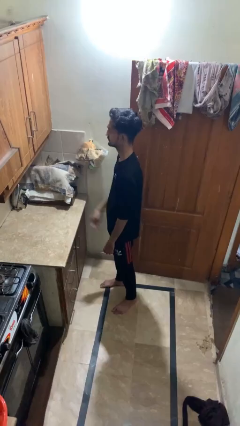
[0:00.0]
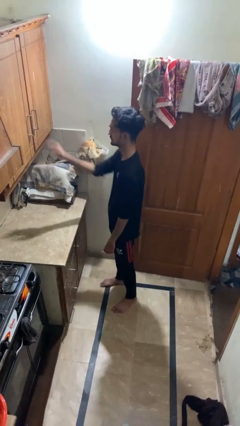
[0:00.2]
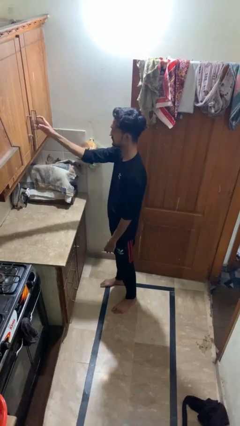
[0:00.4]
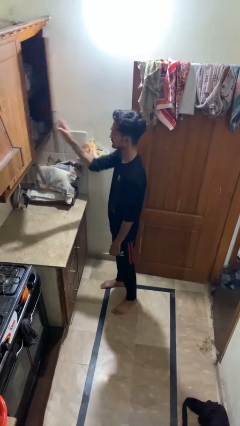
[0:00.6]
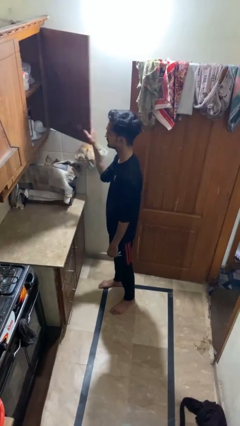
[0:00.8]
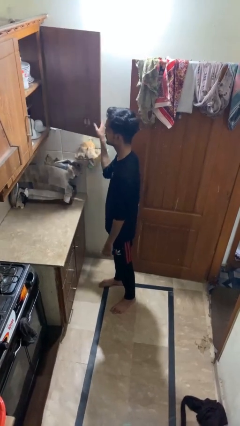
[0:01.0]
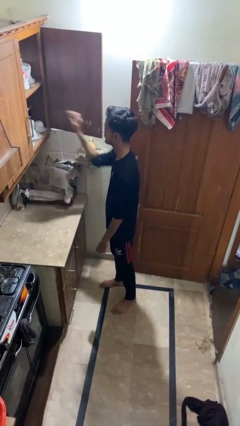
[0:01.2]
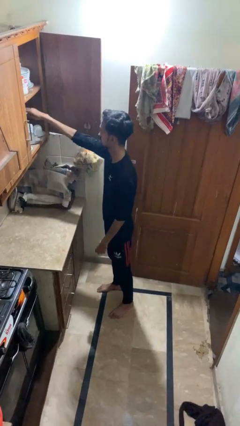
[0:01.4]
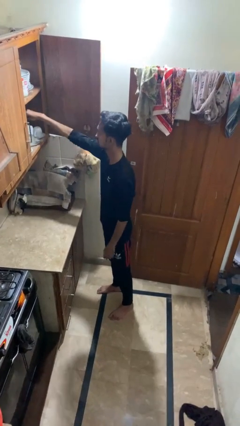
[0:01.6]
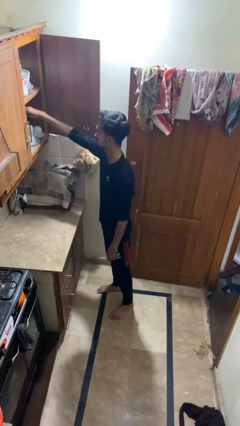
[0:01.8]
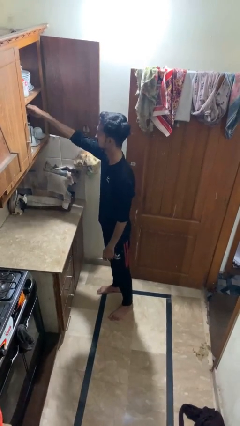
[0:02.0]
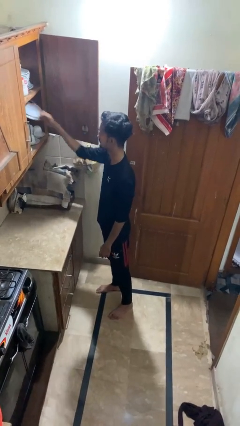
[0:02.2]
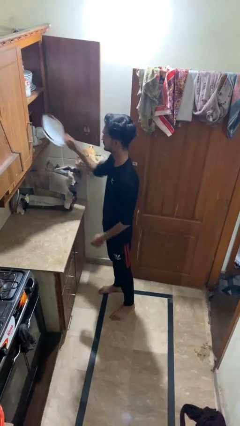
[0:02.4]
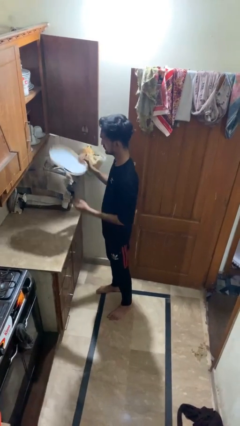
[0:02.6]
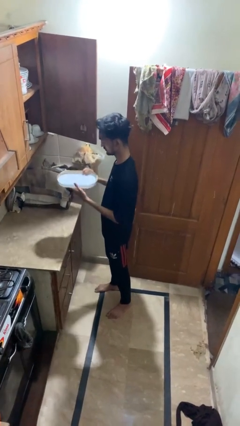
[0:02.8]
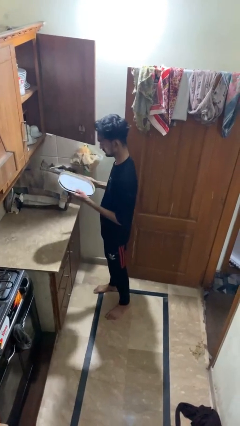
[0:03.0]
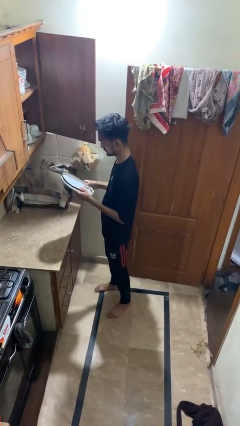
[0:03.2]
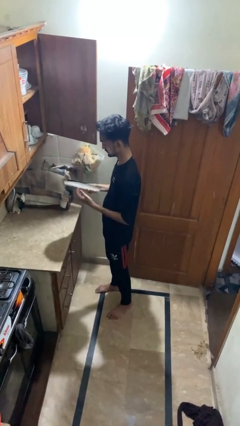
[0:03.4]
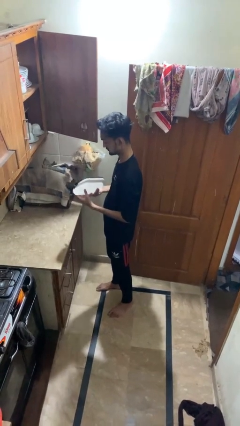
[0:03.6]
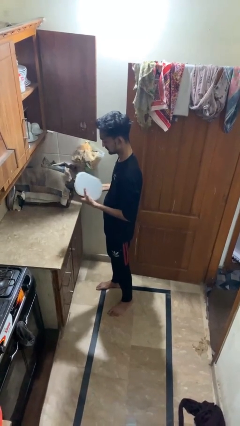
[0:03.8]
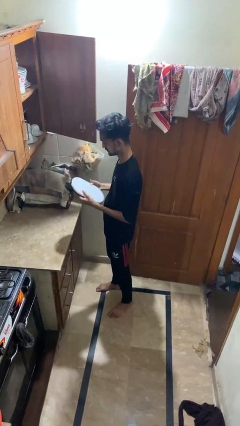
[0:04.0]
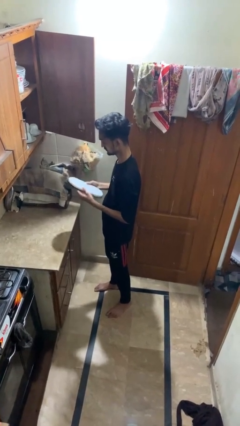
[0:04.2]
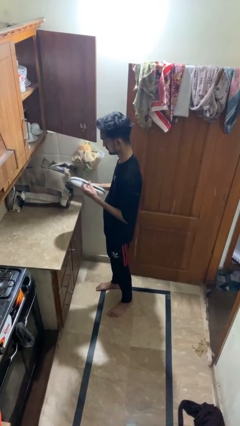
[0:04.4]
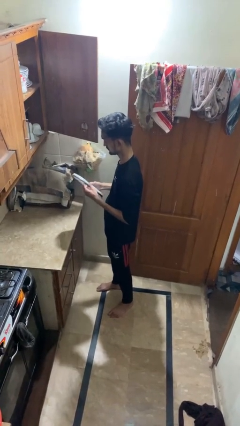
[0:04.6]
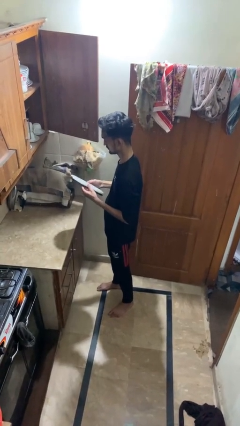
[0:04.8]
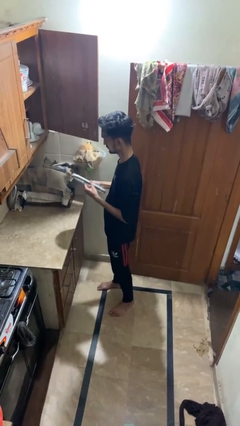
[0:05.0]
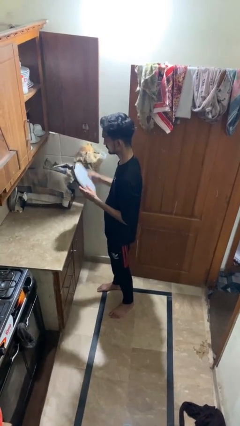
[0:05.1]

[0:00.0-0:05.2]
person puts object in cabinet

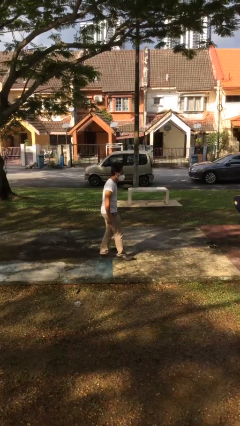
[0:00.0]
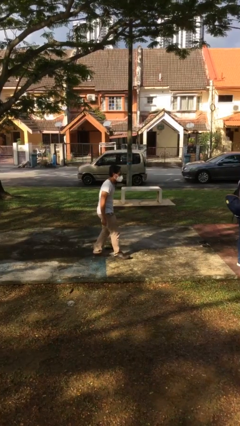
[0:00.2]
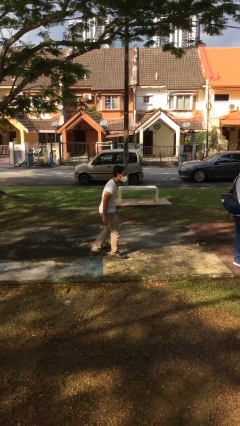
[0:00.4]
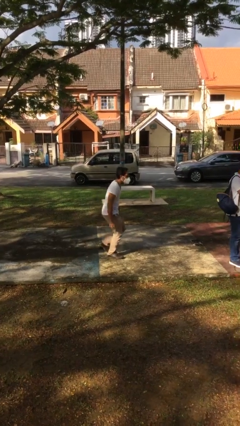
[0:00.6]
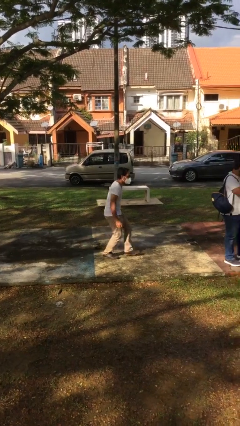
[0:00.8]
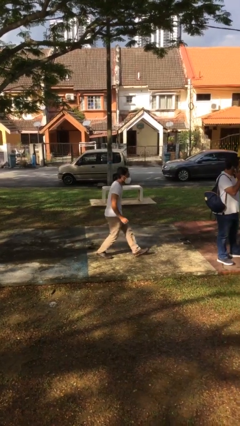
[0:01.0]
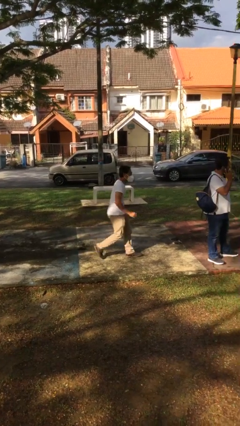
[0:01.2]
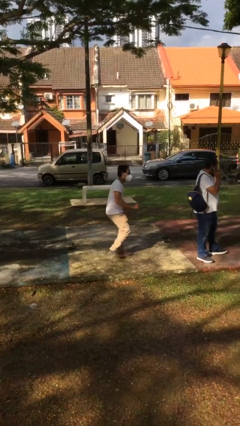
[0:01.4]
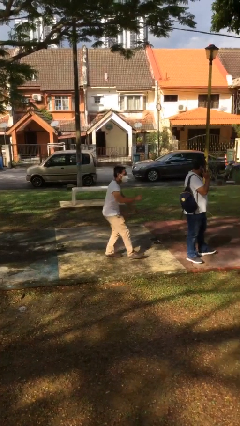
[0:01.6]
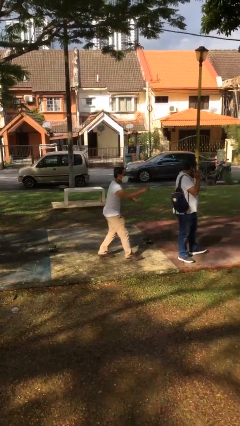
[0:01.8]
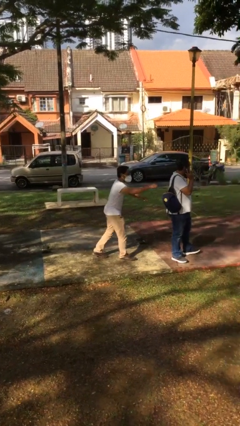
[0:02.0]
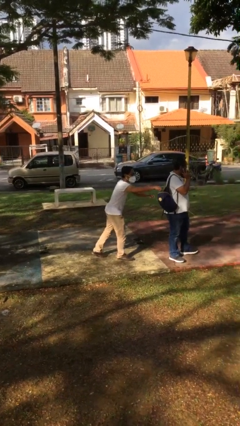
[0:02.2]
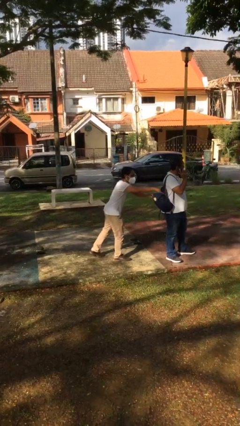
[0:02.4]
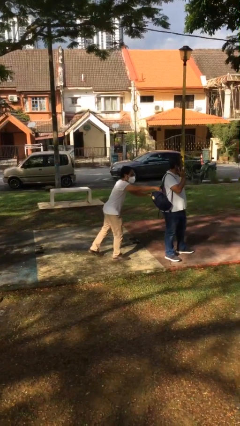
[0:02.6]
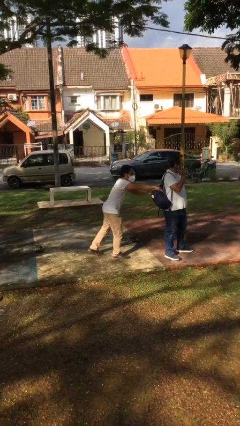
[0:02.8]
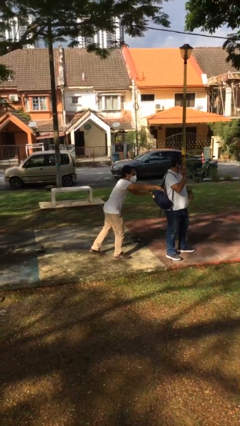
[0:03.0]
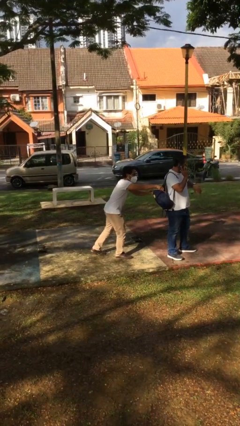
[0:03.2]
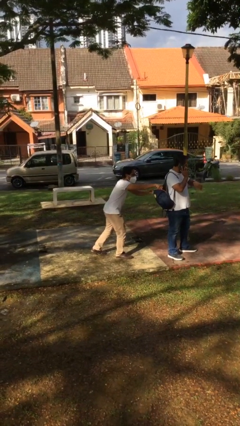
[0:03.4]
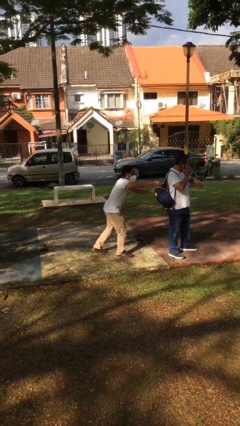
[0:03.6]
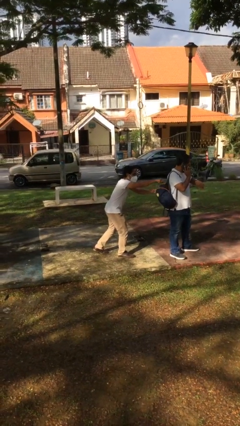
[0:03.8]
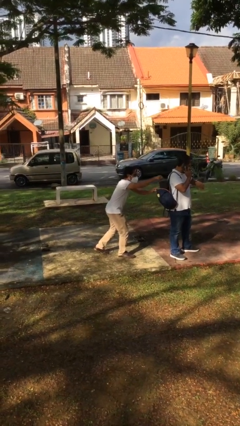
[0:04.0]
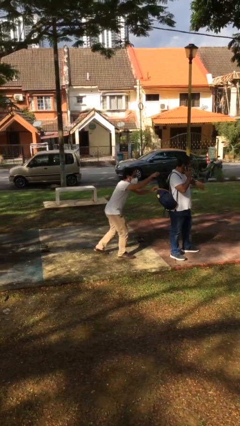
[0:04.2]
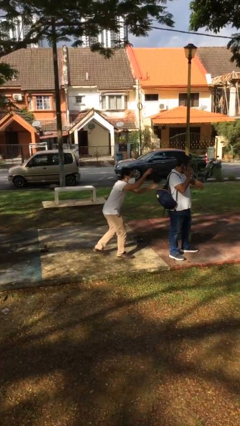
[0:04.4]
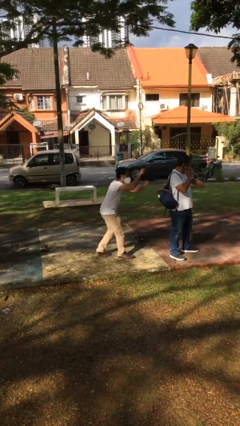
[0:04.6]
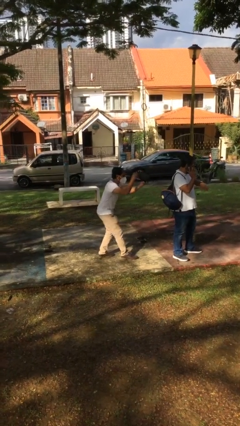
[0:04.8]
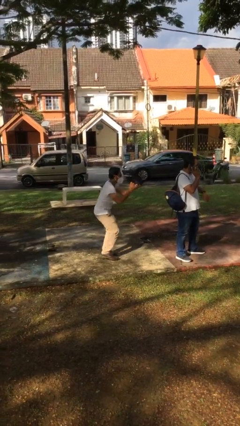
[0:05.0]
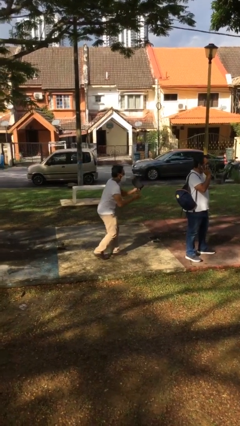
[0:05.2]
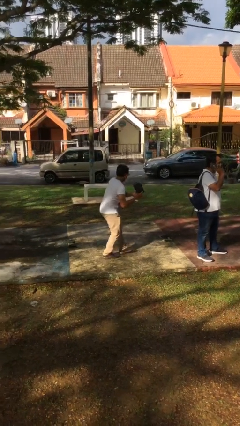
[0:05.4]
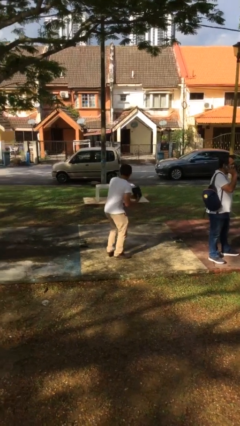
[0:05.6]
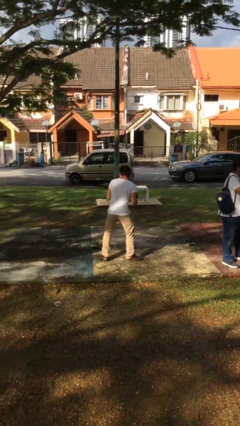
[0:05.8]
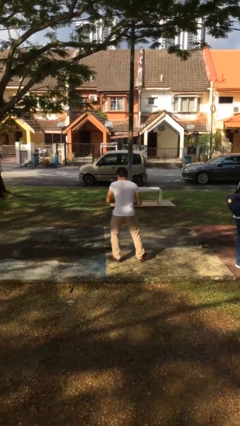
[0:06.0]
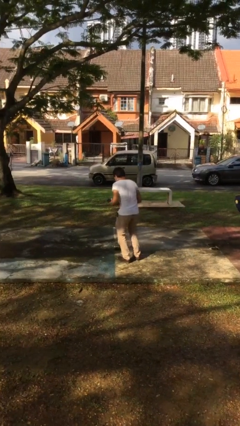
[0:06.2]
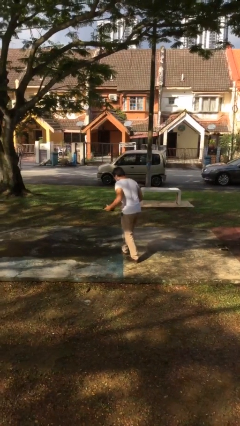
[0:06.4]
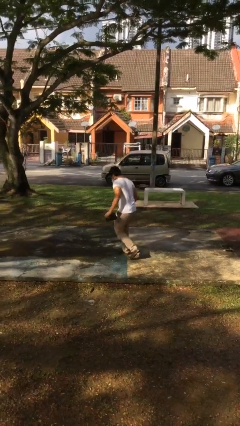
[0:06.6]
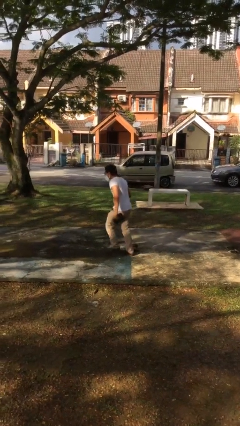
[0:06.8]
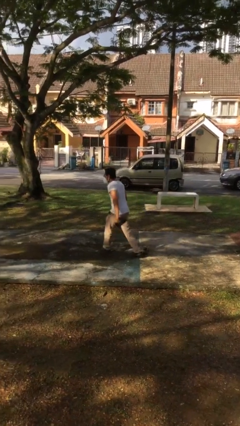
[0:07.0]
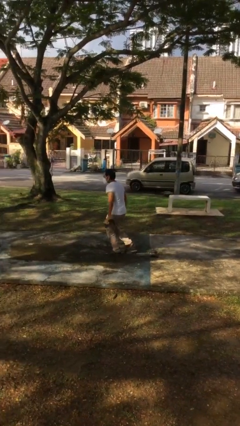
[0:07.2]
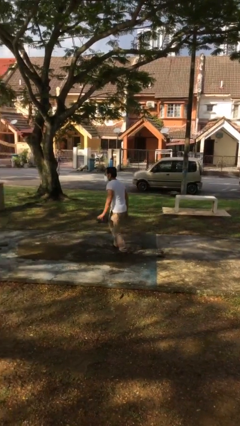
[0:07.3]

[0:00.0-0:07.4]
person steals object from person

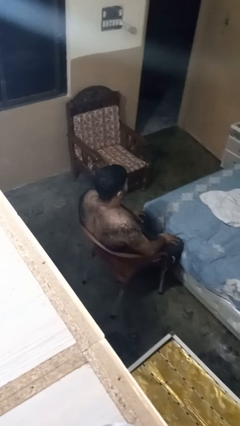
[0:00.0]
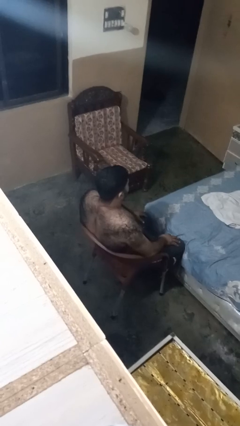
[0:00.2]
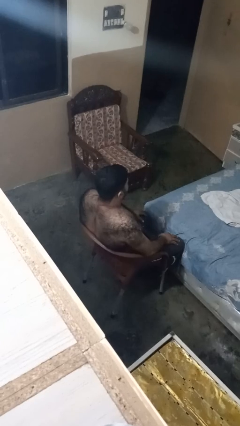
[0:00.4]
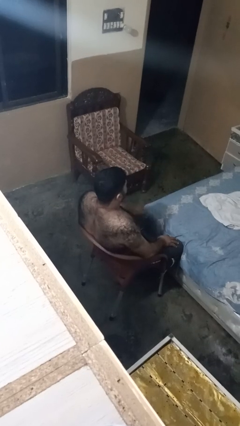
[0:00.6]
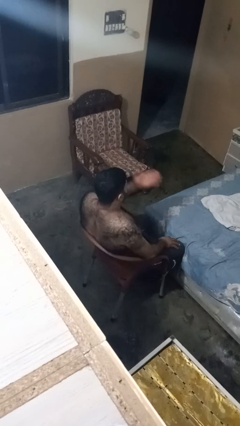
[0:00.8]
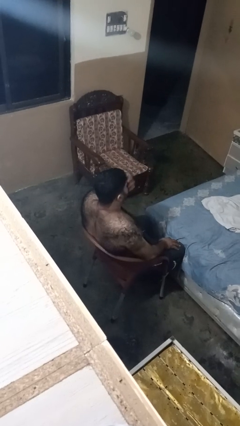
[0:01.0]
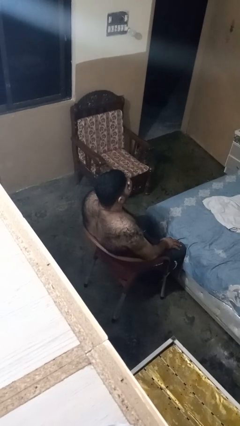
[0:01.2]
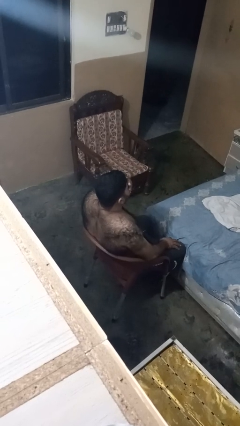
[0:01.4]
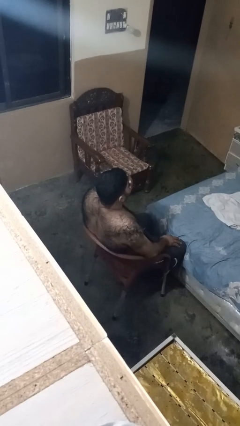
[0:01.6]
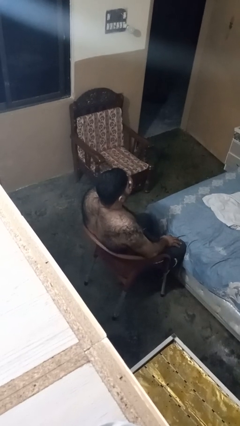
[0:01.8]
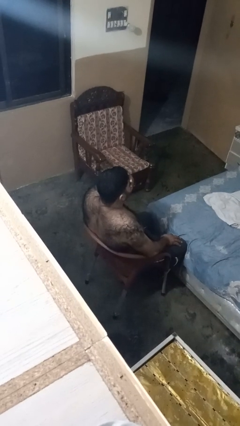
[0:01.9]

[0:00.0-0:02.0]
person covers face with hands

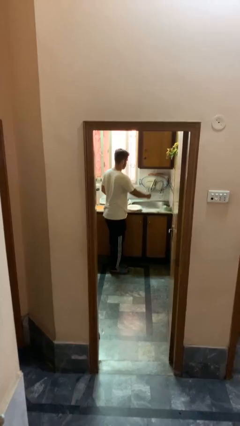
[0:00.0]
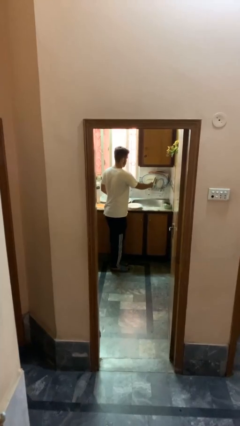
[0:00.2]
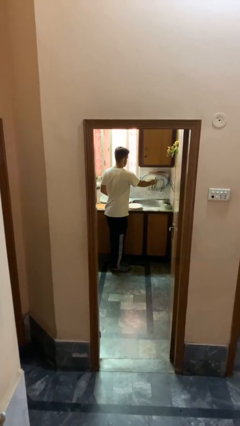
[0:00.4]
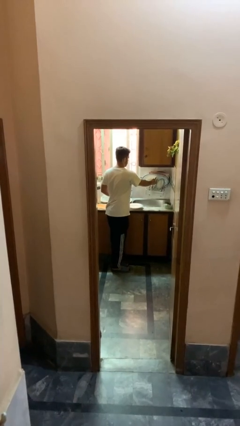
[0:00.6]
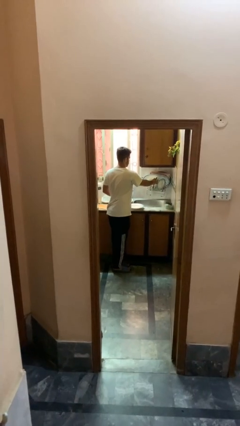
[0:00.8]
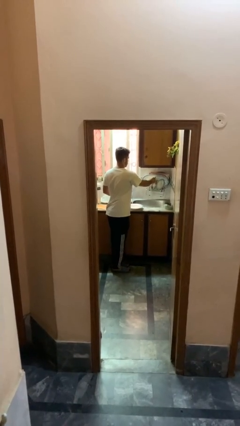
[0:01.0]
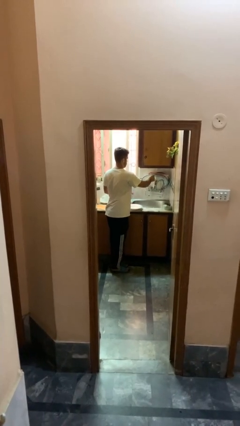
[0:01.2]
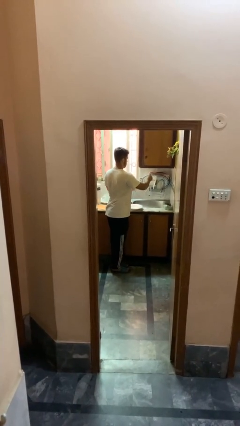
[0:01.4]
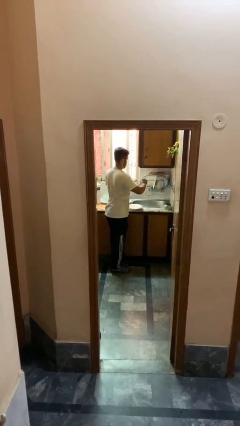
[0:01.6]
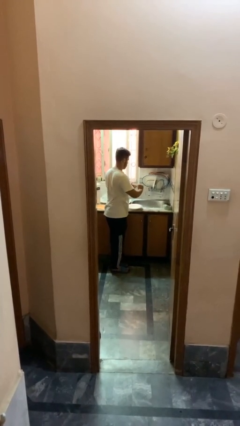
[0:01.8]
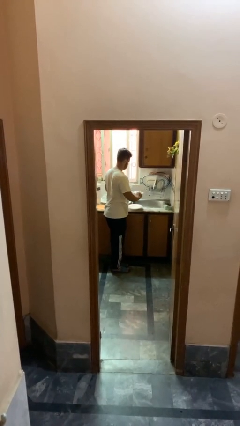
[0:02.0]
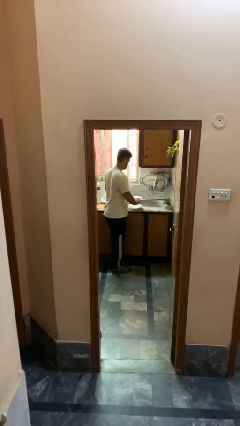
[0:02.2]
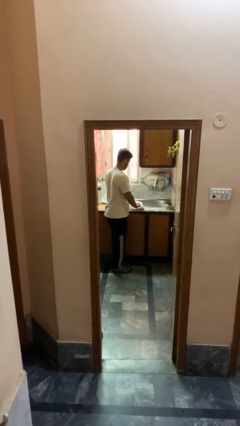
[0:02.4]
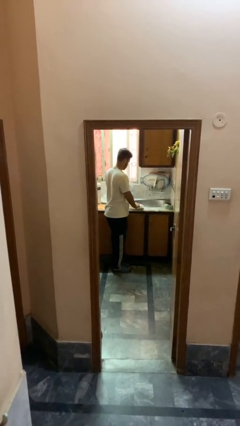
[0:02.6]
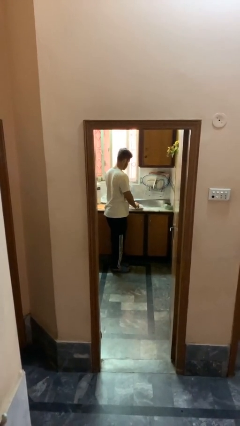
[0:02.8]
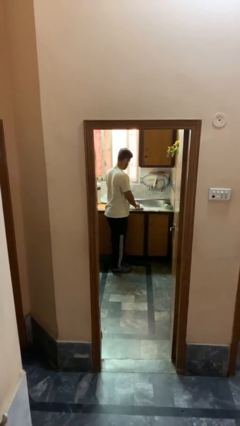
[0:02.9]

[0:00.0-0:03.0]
person unloads dishwasher
